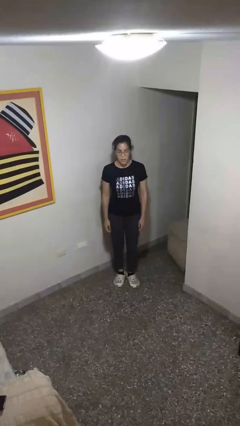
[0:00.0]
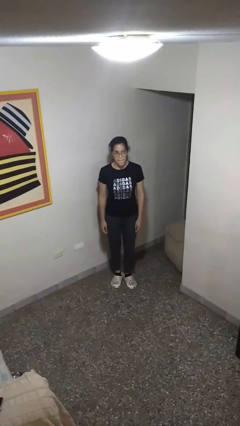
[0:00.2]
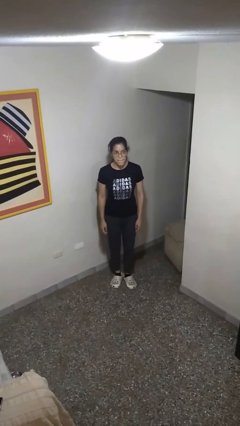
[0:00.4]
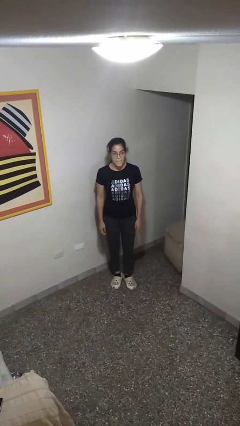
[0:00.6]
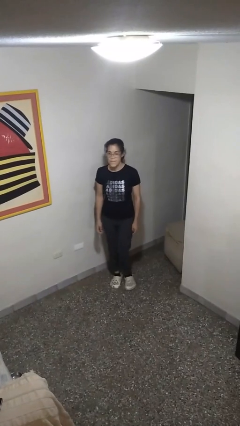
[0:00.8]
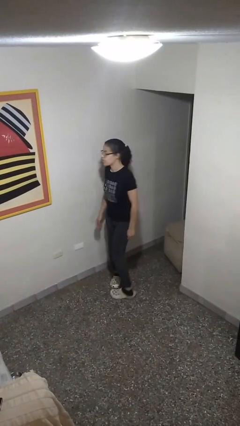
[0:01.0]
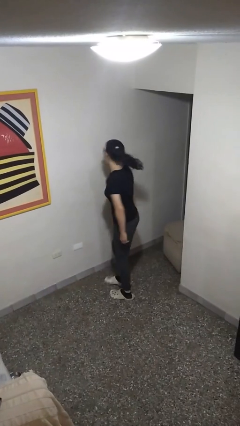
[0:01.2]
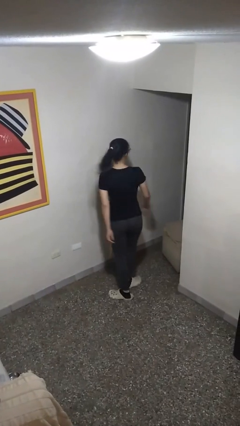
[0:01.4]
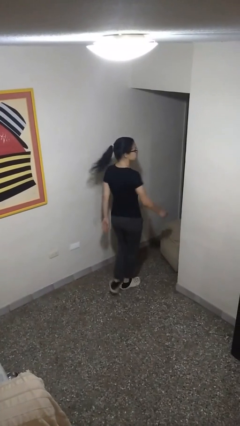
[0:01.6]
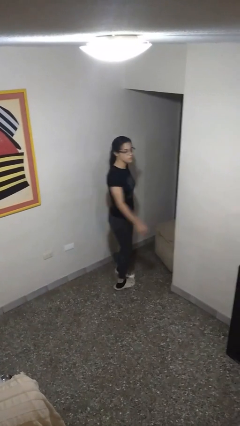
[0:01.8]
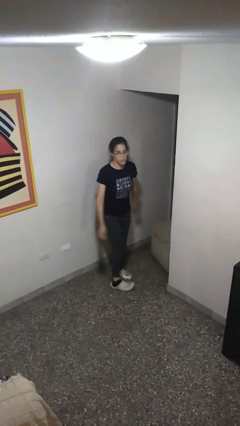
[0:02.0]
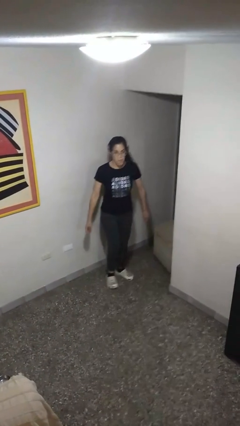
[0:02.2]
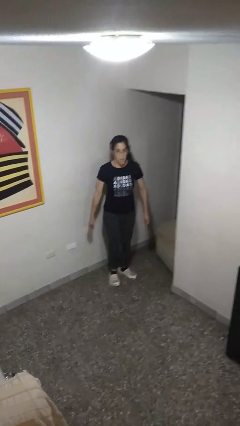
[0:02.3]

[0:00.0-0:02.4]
person twirls

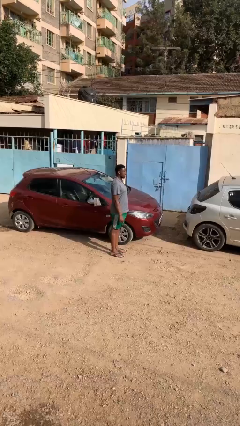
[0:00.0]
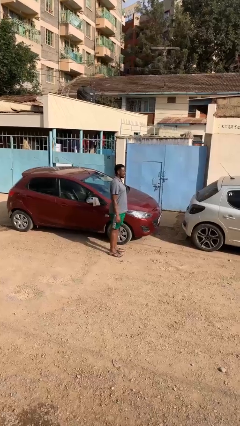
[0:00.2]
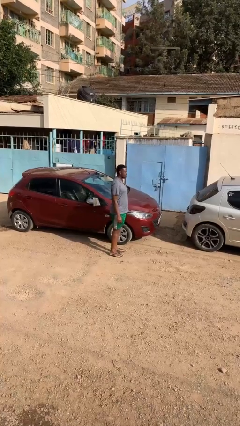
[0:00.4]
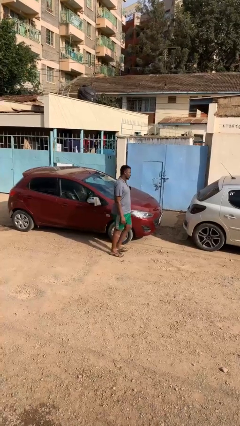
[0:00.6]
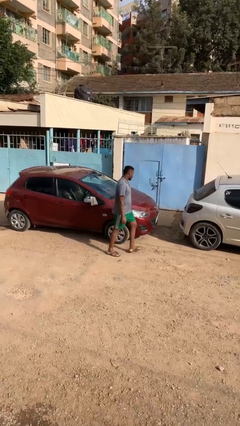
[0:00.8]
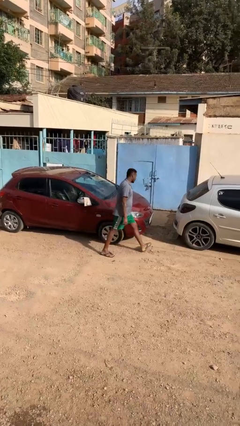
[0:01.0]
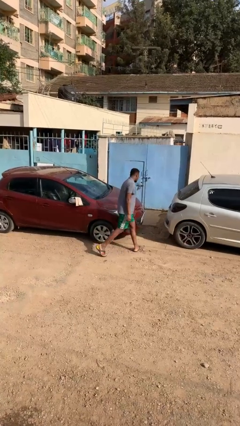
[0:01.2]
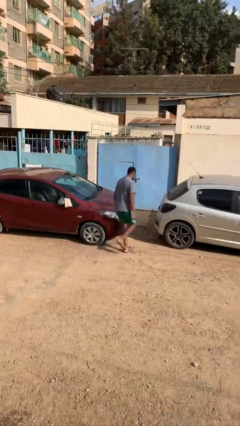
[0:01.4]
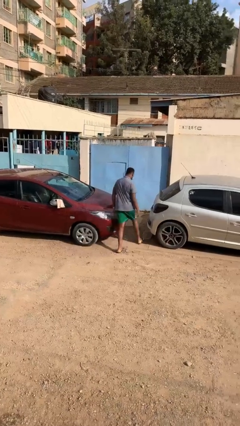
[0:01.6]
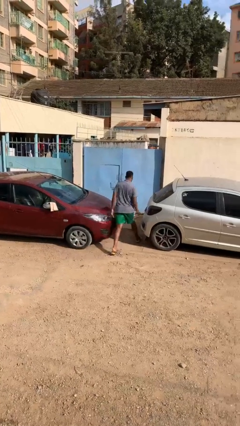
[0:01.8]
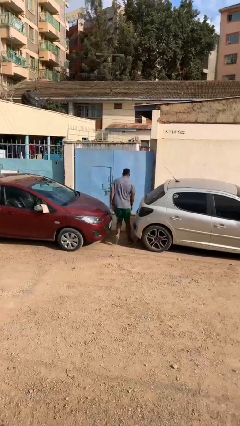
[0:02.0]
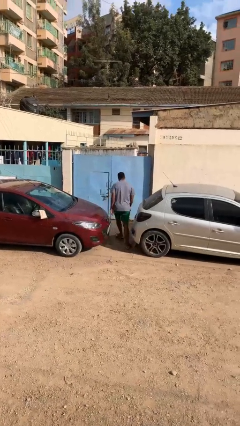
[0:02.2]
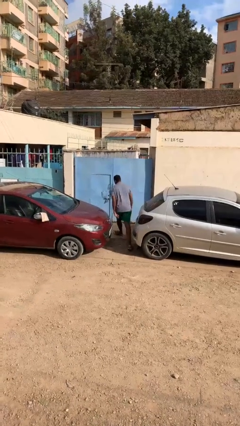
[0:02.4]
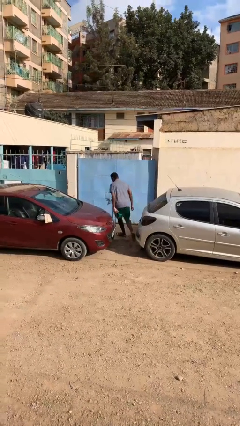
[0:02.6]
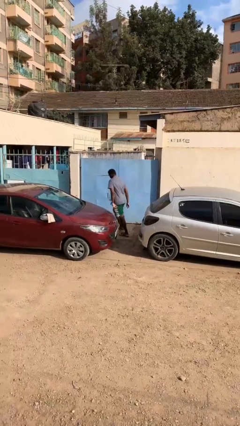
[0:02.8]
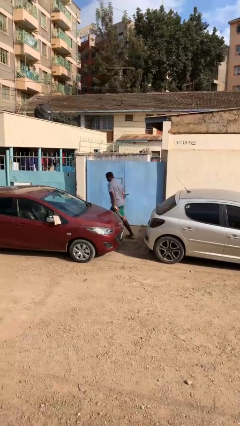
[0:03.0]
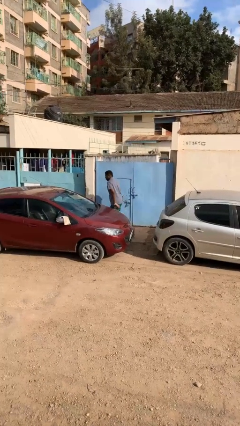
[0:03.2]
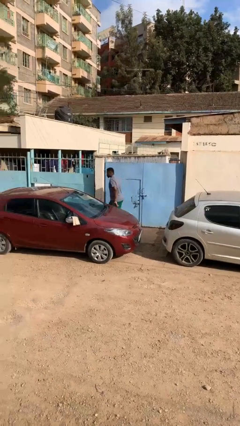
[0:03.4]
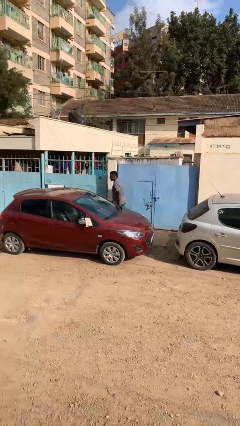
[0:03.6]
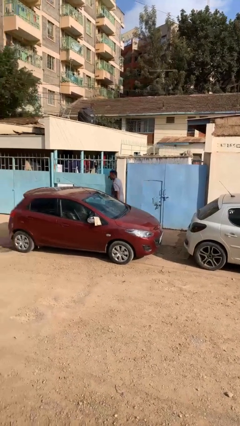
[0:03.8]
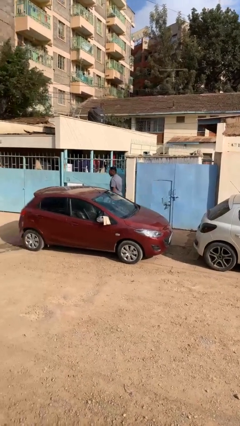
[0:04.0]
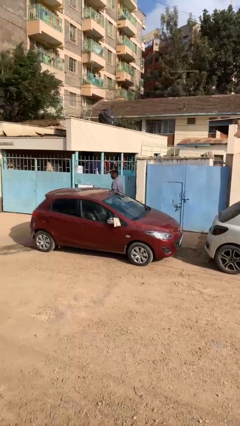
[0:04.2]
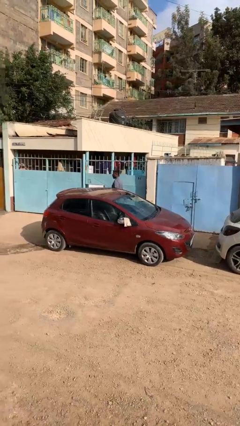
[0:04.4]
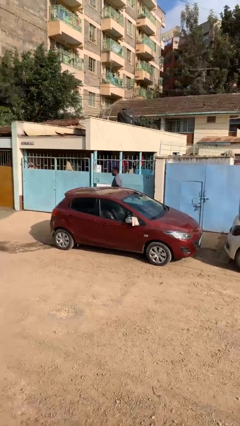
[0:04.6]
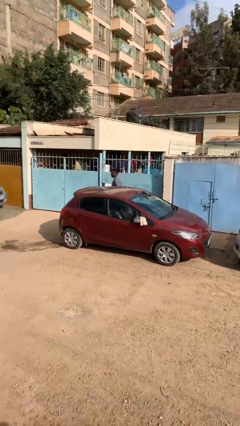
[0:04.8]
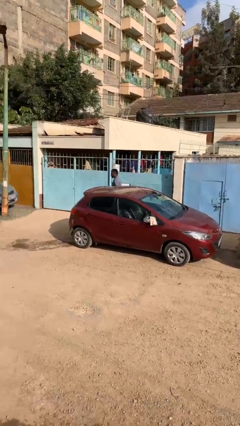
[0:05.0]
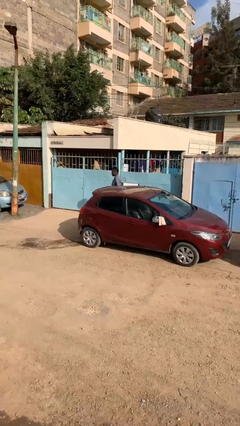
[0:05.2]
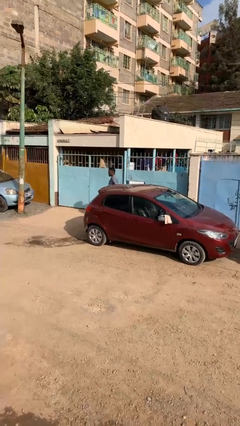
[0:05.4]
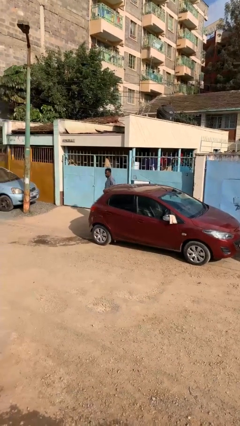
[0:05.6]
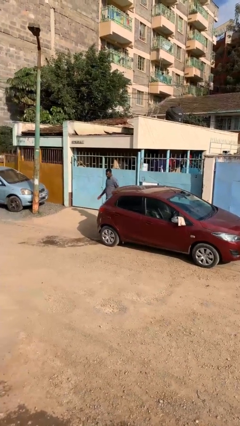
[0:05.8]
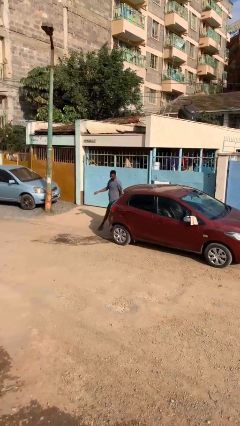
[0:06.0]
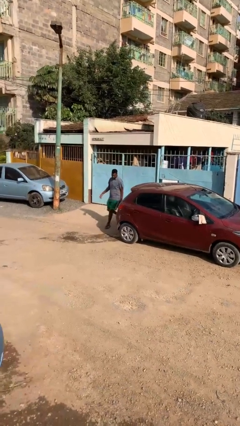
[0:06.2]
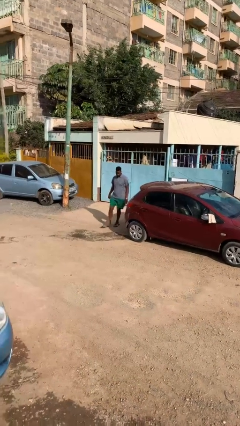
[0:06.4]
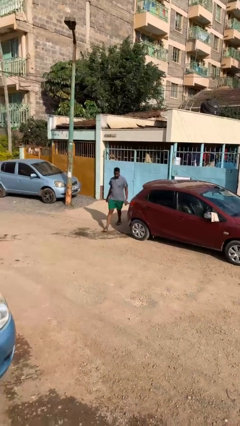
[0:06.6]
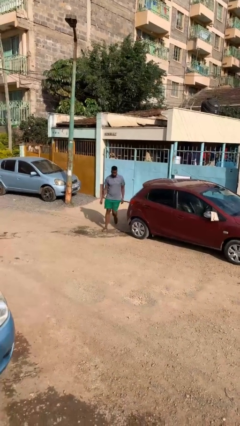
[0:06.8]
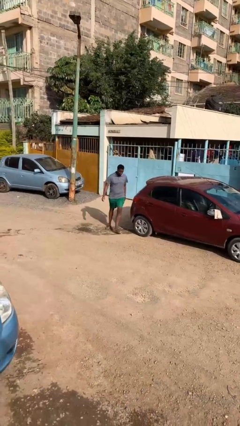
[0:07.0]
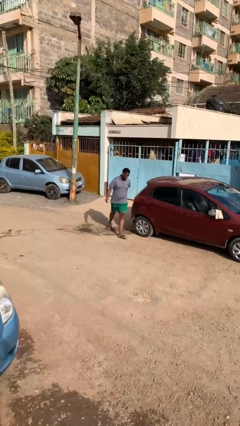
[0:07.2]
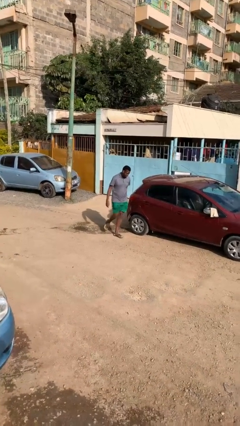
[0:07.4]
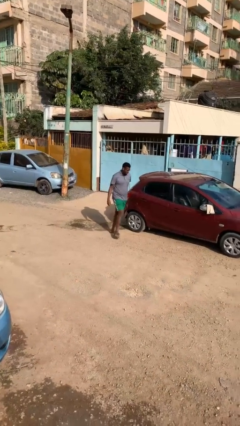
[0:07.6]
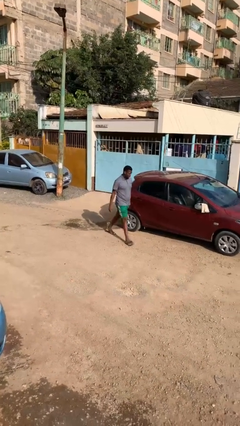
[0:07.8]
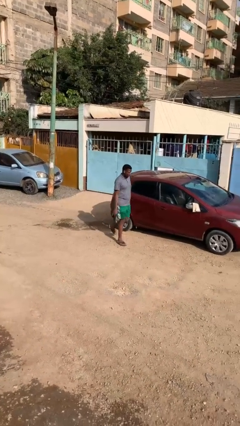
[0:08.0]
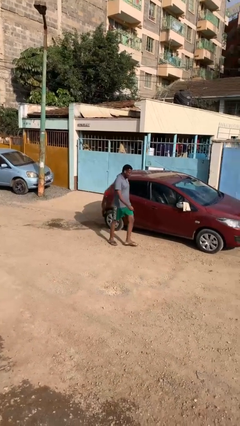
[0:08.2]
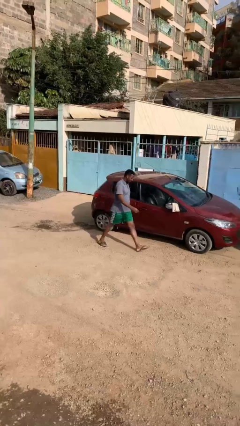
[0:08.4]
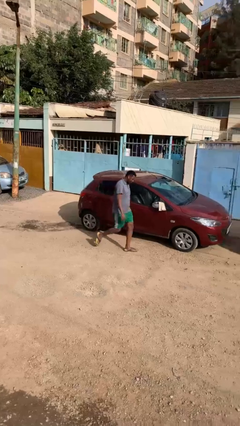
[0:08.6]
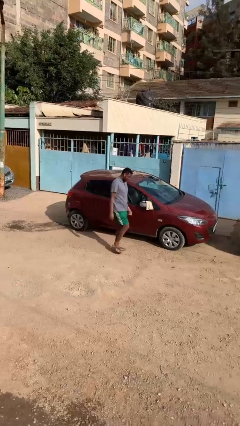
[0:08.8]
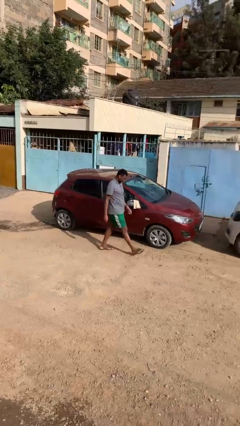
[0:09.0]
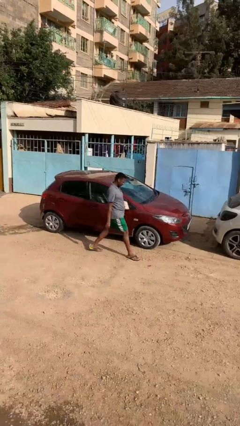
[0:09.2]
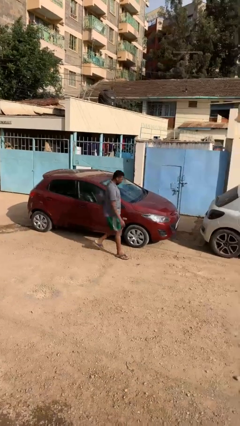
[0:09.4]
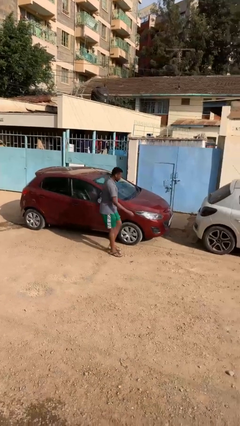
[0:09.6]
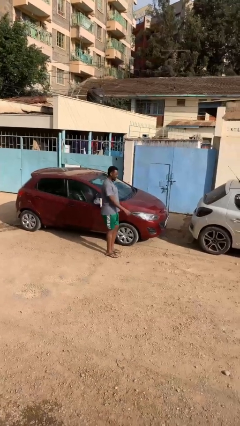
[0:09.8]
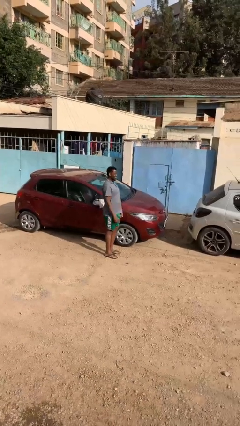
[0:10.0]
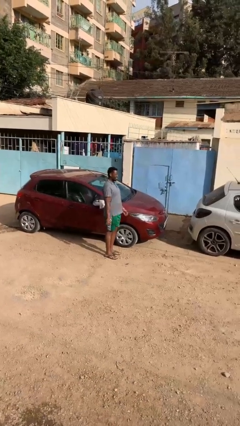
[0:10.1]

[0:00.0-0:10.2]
person walks around car

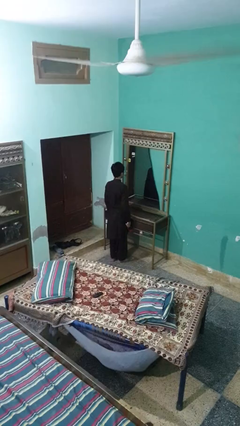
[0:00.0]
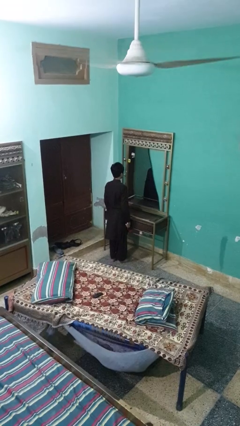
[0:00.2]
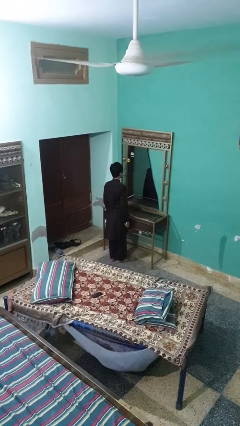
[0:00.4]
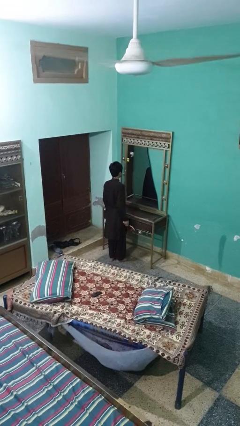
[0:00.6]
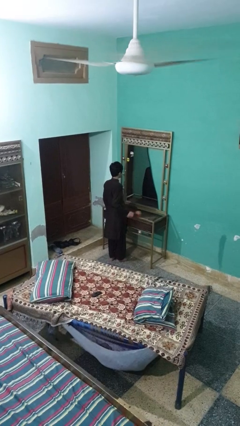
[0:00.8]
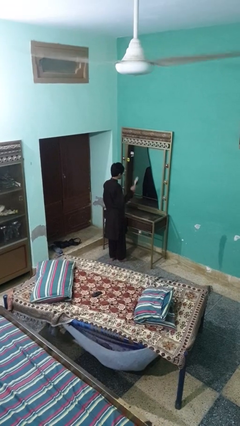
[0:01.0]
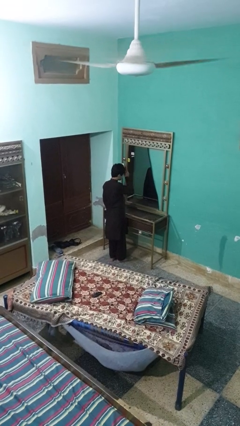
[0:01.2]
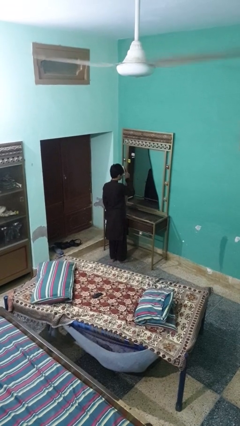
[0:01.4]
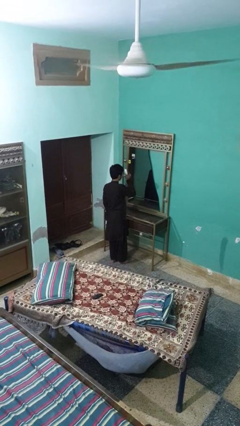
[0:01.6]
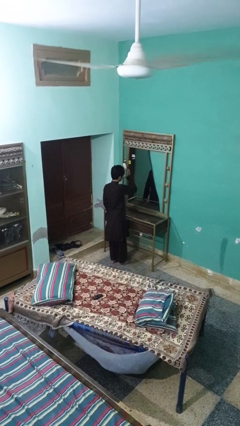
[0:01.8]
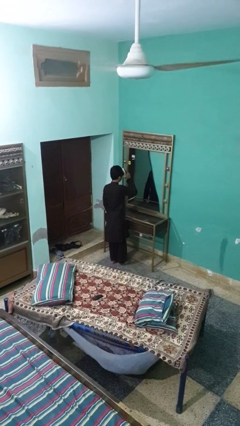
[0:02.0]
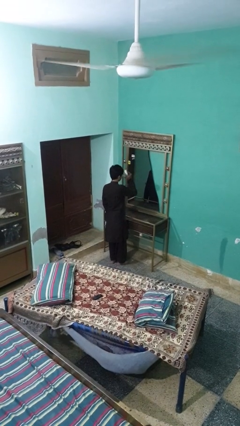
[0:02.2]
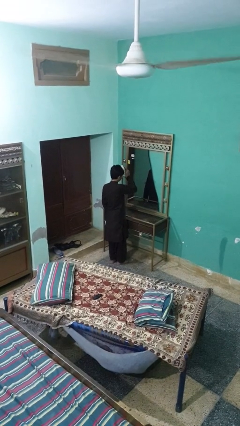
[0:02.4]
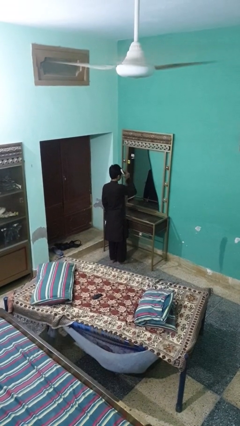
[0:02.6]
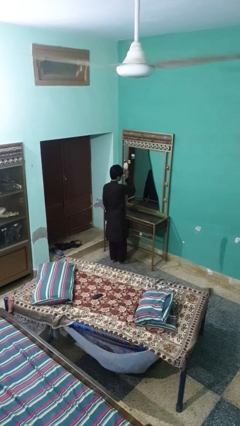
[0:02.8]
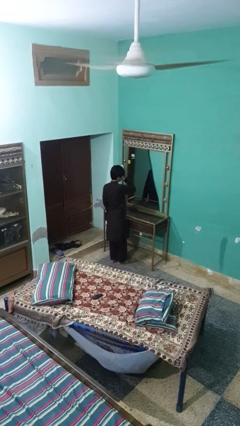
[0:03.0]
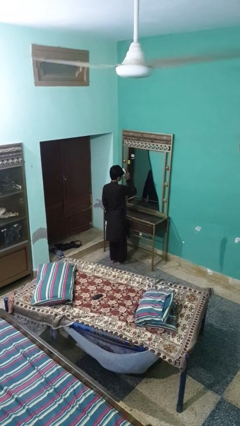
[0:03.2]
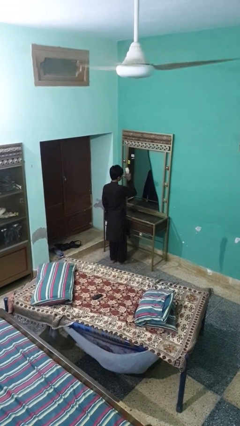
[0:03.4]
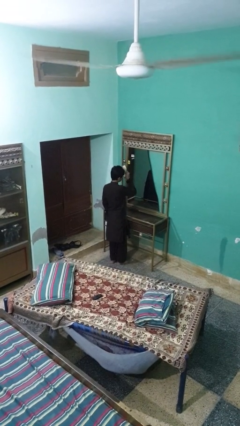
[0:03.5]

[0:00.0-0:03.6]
person brushes hair

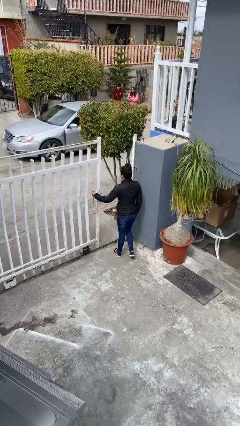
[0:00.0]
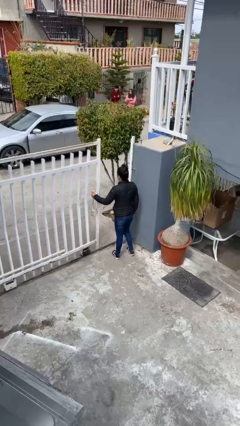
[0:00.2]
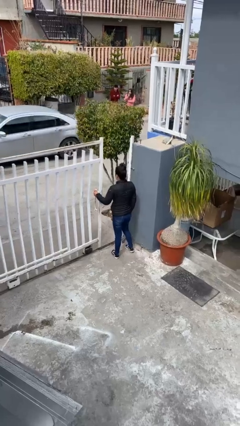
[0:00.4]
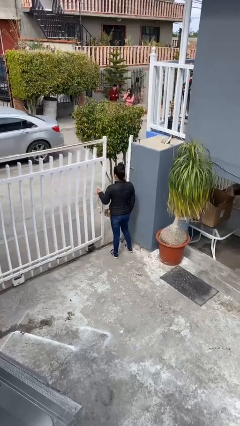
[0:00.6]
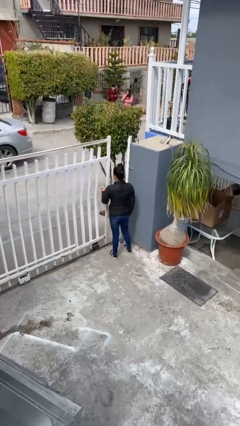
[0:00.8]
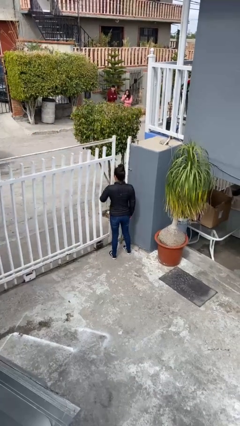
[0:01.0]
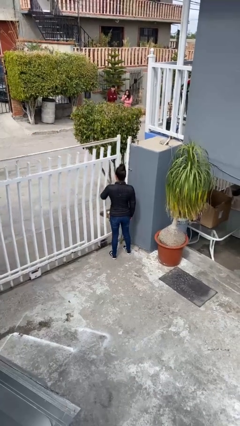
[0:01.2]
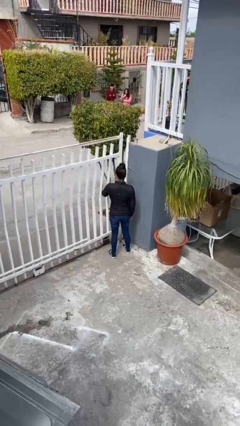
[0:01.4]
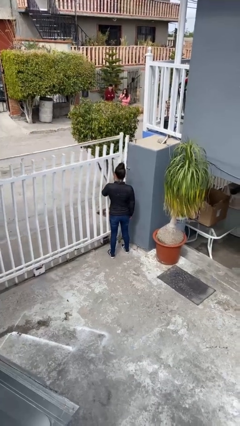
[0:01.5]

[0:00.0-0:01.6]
person closes facility door
